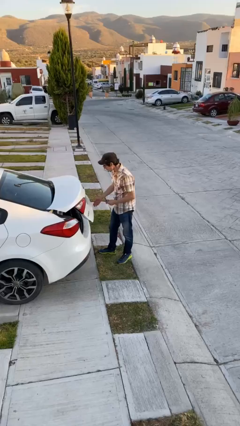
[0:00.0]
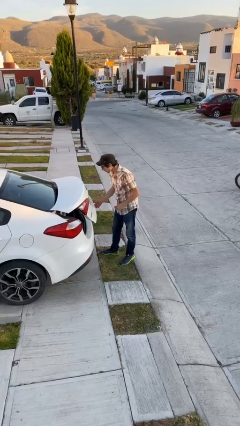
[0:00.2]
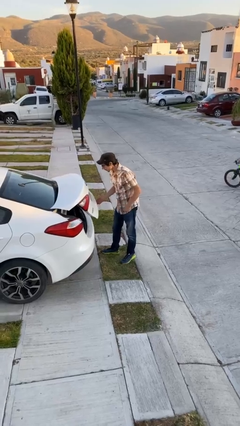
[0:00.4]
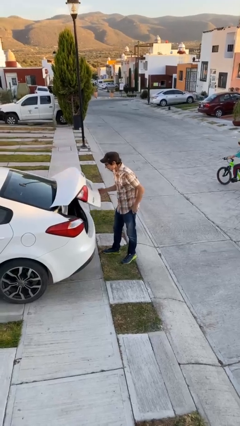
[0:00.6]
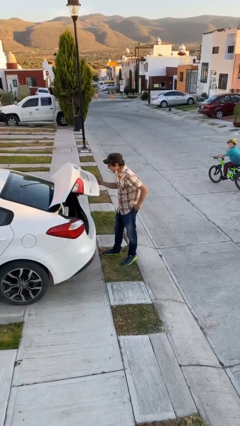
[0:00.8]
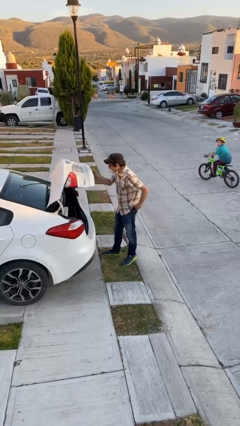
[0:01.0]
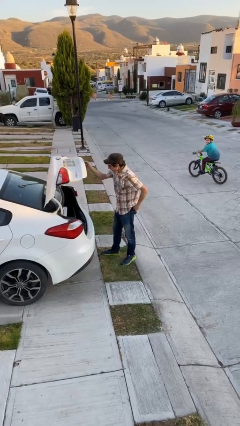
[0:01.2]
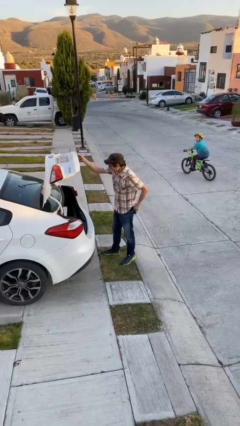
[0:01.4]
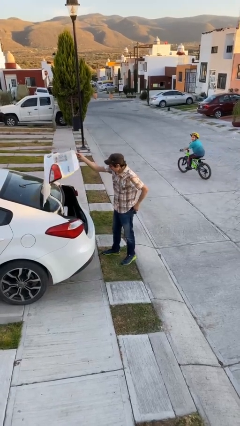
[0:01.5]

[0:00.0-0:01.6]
person opens car trunk

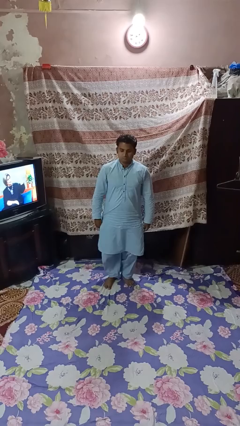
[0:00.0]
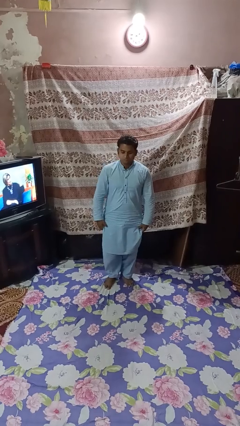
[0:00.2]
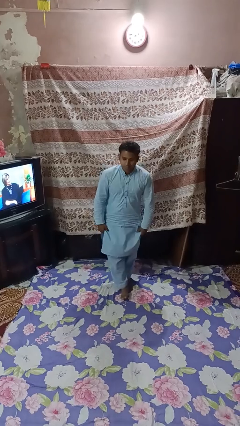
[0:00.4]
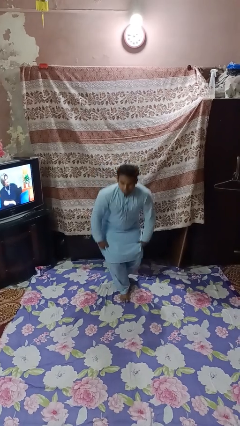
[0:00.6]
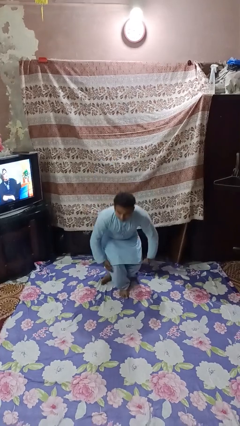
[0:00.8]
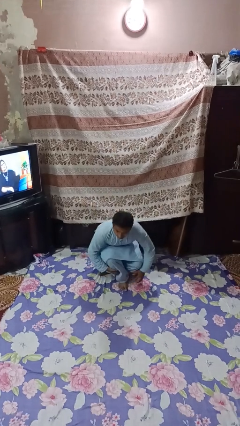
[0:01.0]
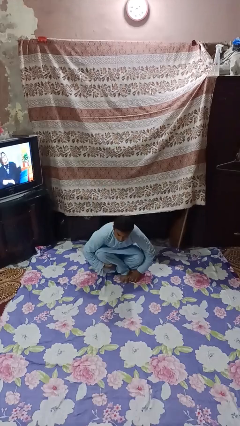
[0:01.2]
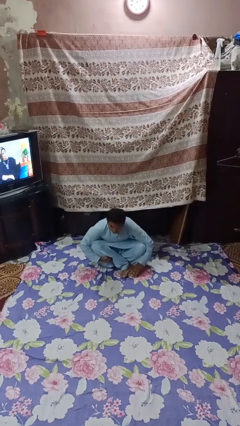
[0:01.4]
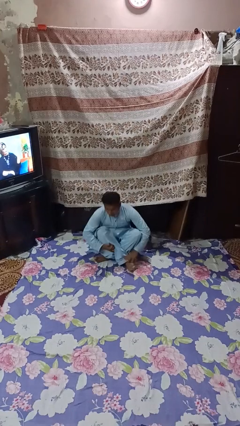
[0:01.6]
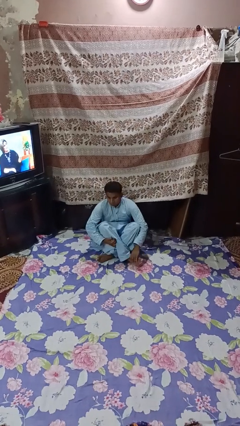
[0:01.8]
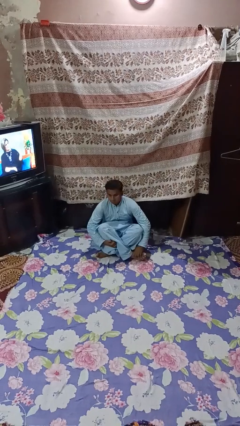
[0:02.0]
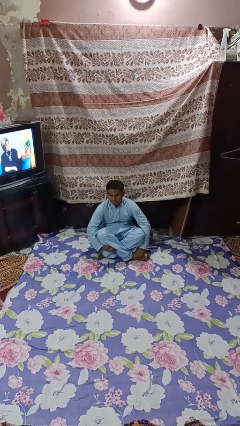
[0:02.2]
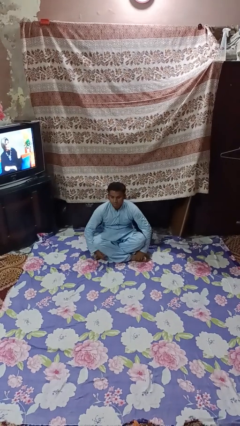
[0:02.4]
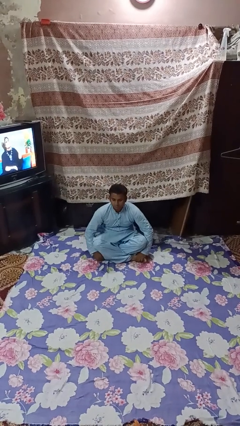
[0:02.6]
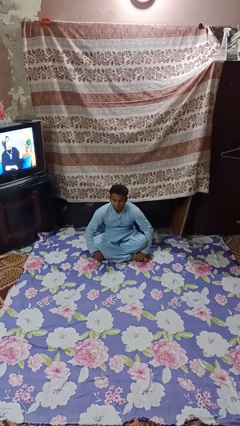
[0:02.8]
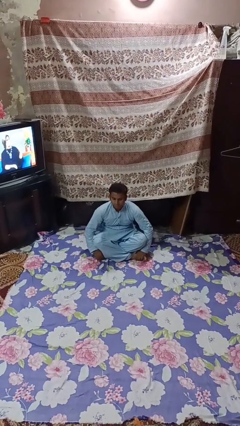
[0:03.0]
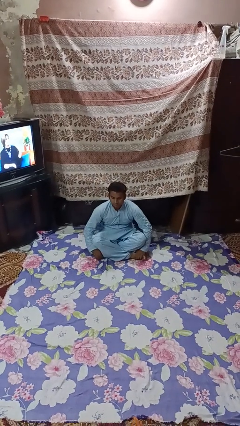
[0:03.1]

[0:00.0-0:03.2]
person sits crisscross

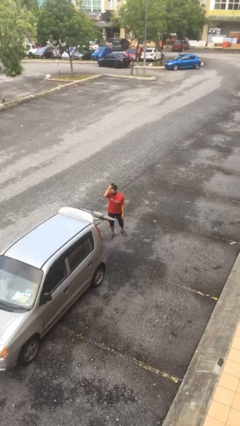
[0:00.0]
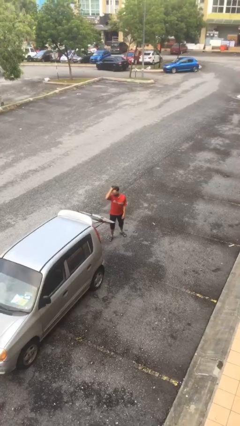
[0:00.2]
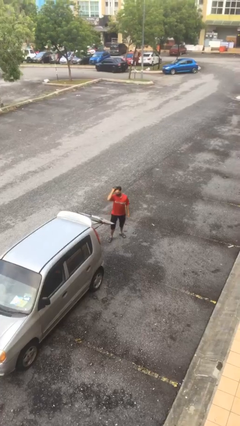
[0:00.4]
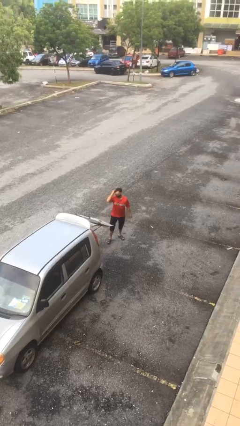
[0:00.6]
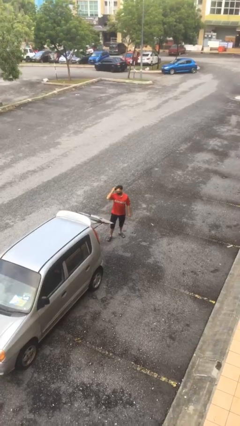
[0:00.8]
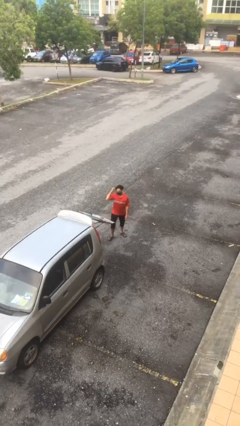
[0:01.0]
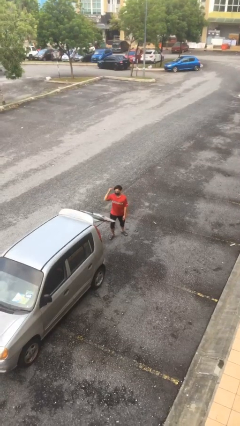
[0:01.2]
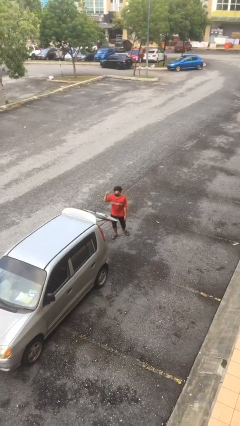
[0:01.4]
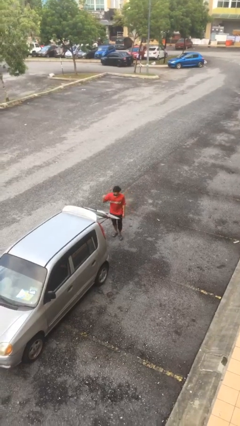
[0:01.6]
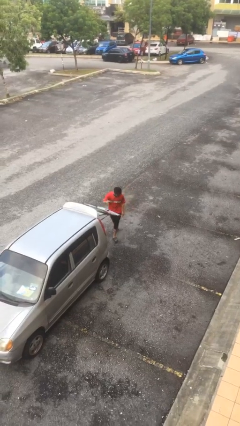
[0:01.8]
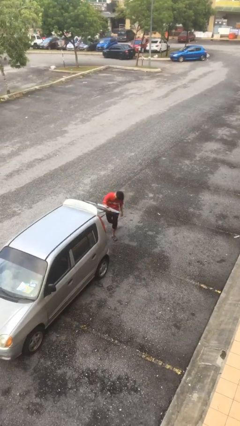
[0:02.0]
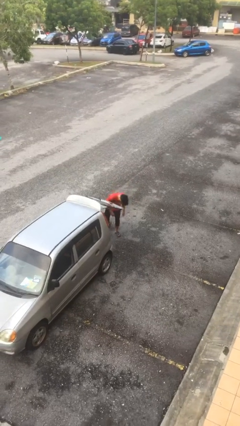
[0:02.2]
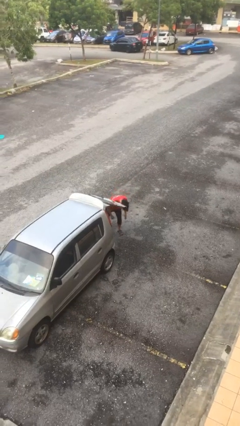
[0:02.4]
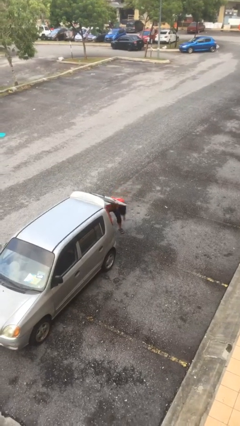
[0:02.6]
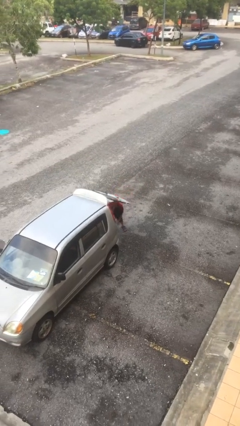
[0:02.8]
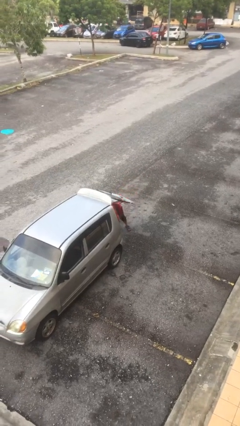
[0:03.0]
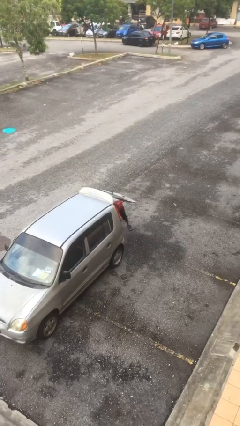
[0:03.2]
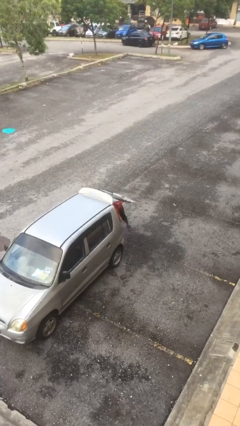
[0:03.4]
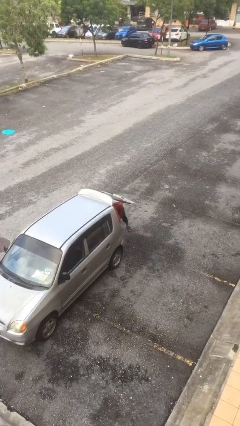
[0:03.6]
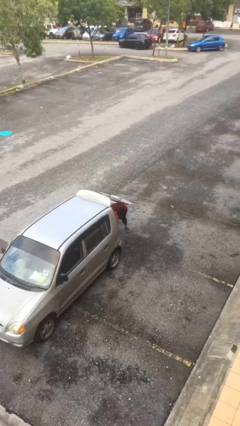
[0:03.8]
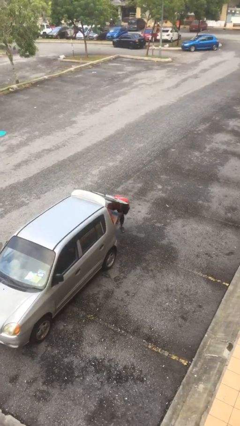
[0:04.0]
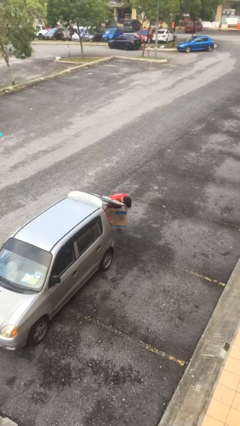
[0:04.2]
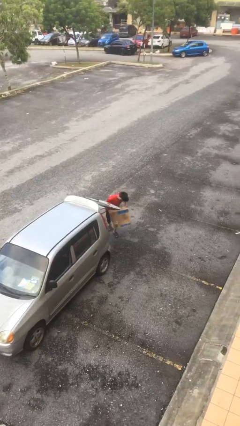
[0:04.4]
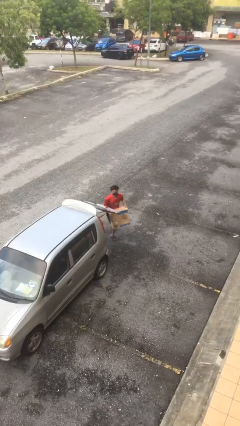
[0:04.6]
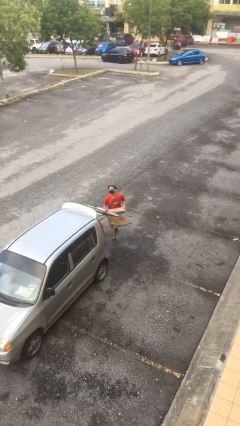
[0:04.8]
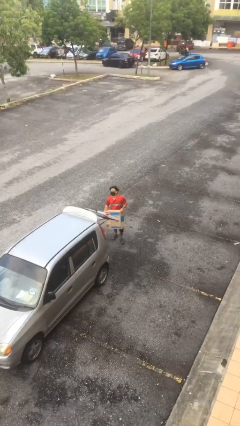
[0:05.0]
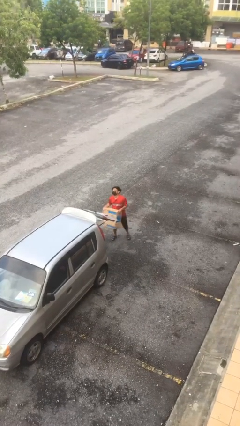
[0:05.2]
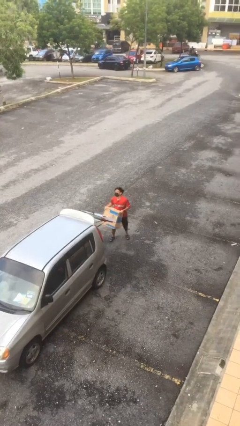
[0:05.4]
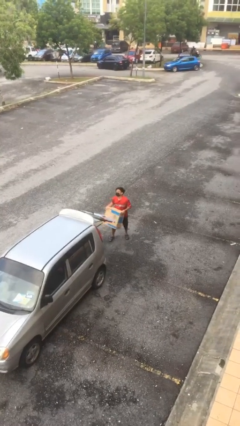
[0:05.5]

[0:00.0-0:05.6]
person unloads car

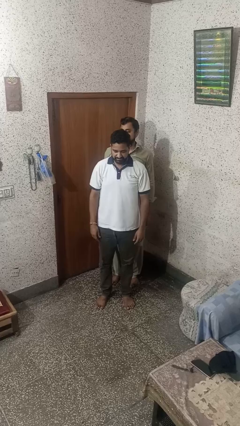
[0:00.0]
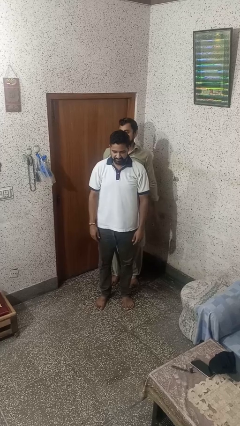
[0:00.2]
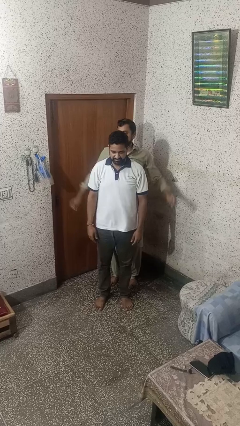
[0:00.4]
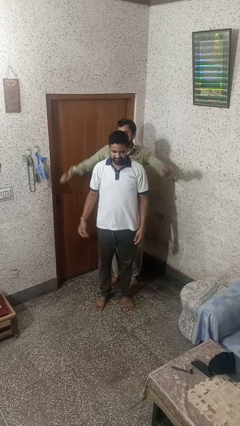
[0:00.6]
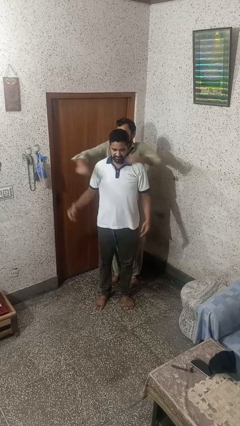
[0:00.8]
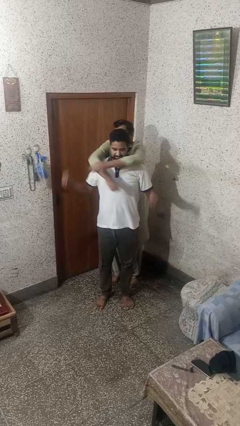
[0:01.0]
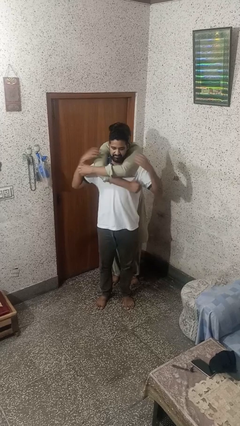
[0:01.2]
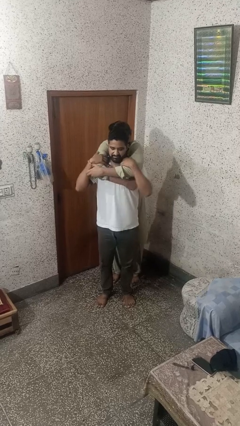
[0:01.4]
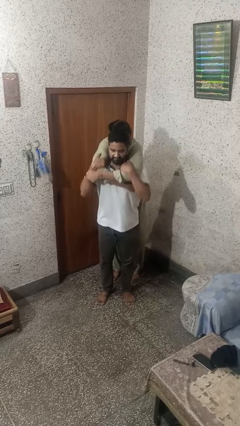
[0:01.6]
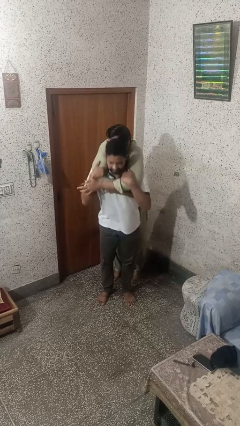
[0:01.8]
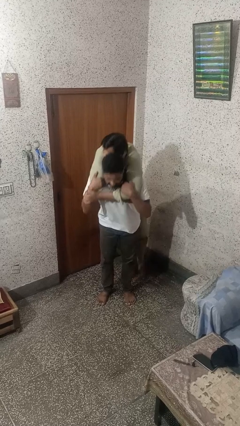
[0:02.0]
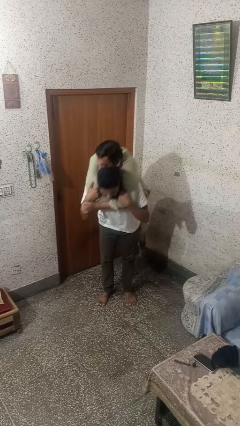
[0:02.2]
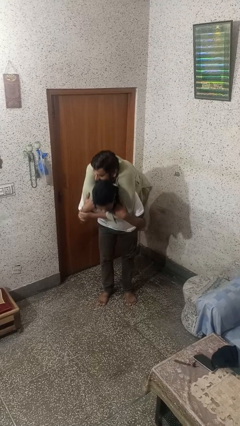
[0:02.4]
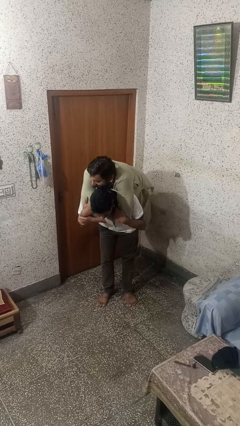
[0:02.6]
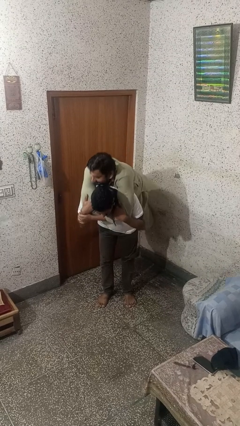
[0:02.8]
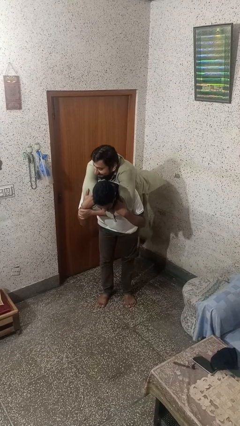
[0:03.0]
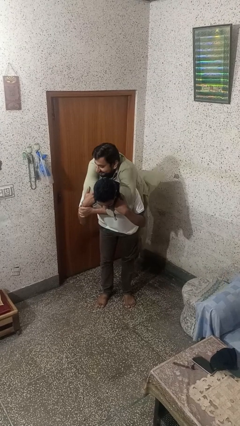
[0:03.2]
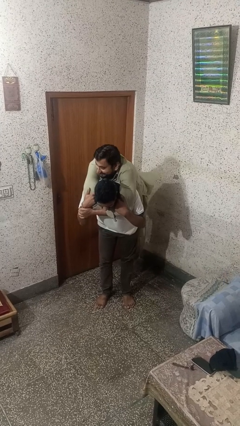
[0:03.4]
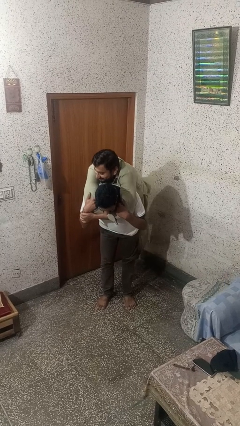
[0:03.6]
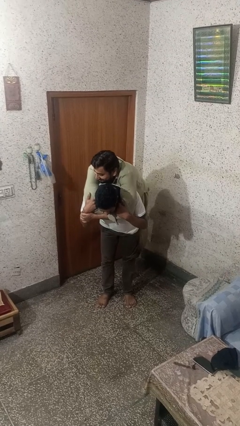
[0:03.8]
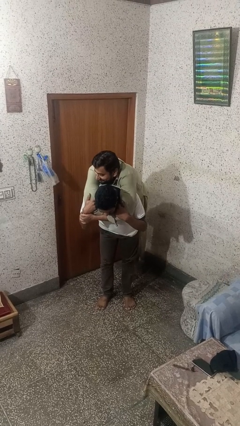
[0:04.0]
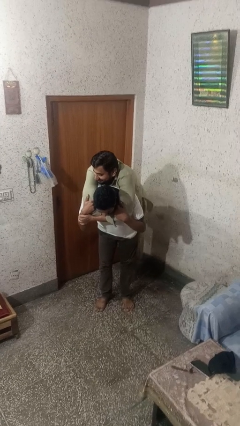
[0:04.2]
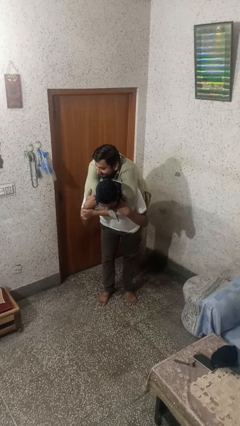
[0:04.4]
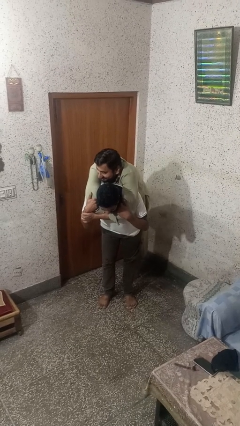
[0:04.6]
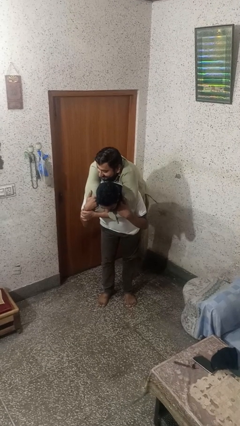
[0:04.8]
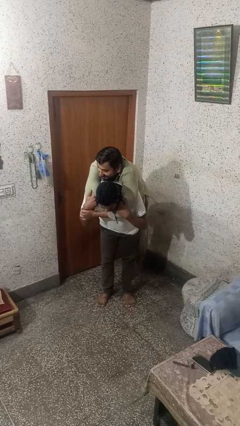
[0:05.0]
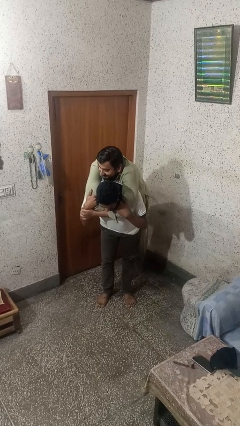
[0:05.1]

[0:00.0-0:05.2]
person carries person on back

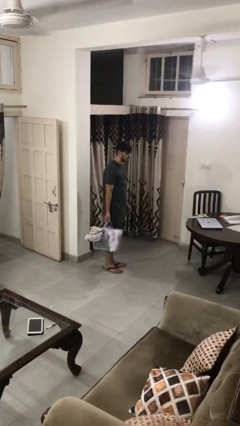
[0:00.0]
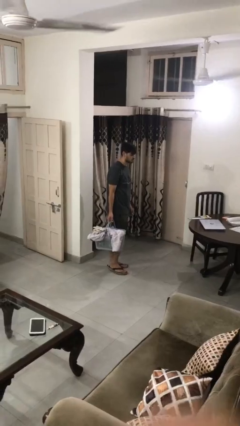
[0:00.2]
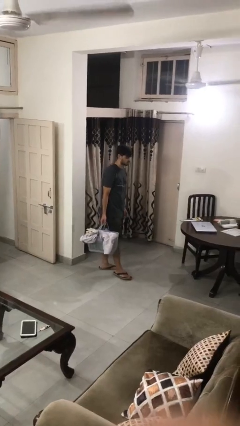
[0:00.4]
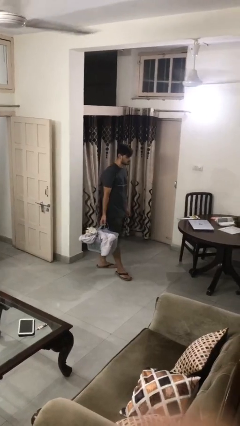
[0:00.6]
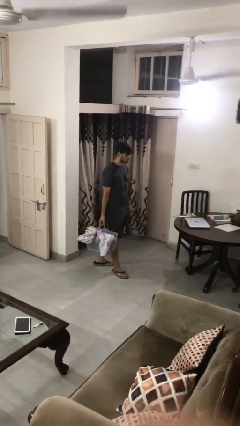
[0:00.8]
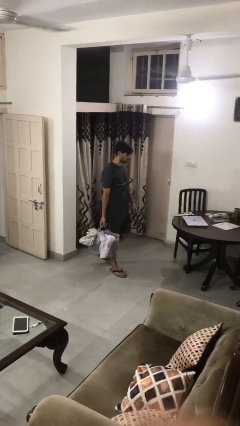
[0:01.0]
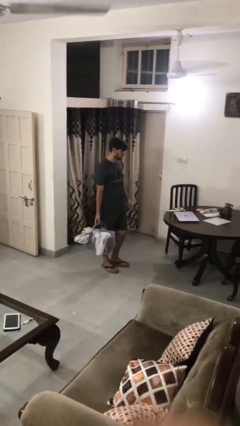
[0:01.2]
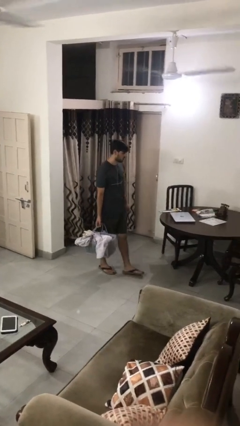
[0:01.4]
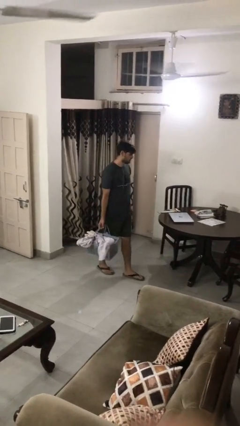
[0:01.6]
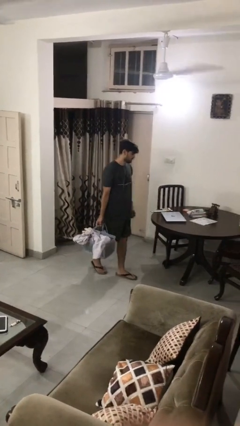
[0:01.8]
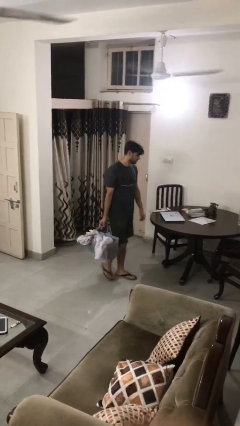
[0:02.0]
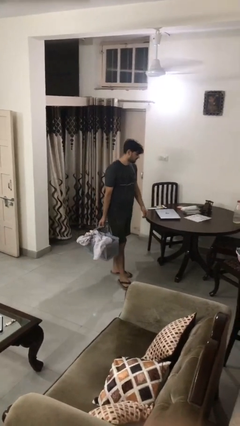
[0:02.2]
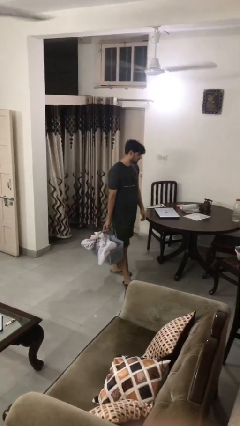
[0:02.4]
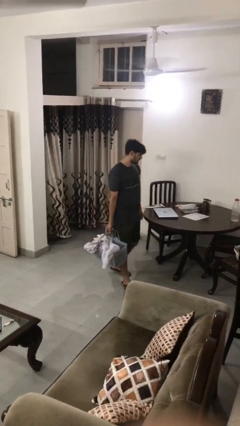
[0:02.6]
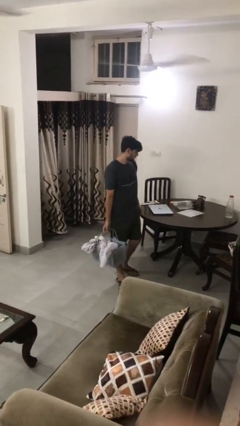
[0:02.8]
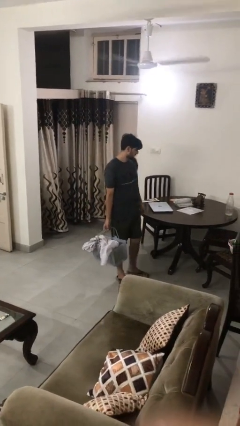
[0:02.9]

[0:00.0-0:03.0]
person carries laundry basket
